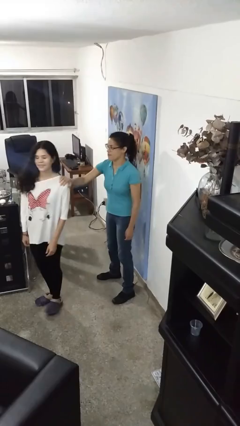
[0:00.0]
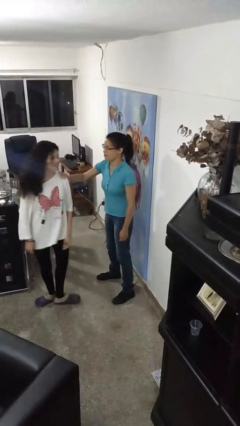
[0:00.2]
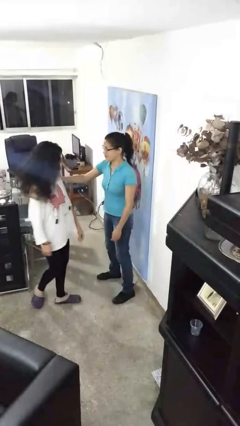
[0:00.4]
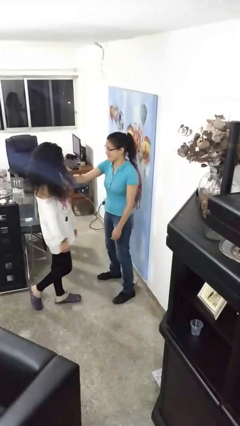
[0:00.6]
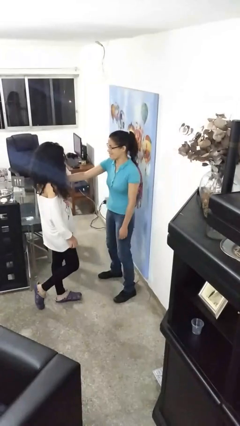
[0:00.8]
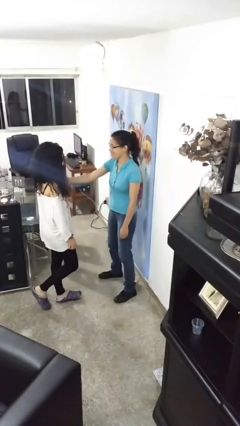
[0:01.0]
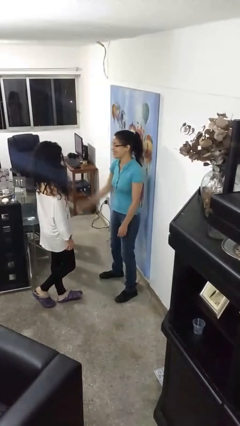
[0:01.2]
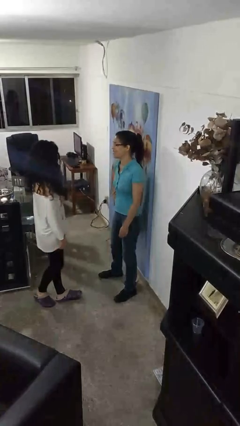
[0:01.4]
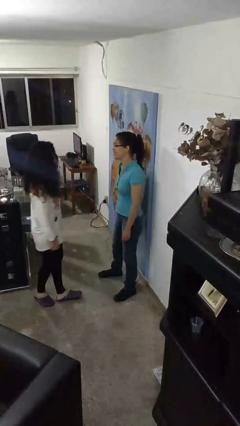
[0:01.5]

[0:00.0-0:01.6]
person spins person around

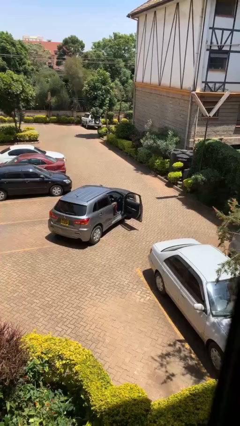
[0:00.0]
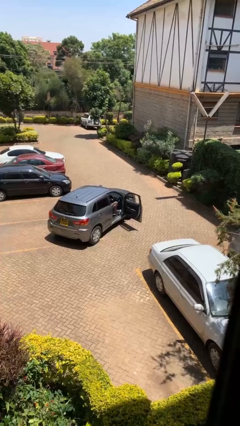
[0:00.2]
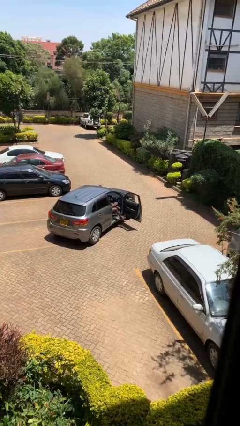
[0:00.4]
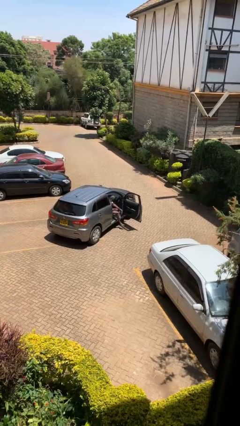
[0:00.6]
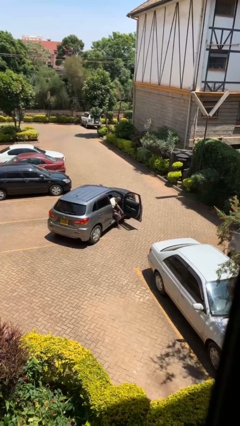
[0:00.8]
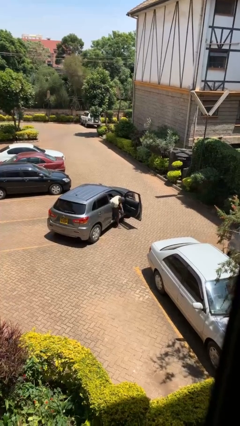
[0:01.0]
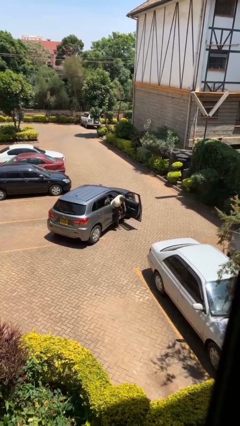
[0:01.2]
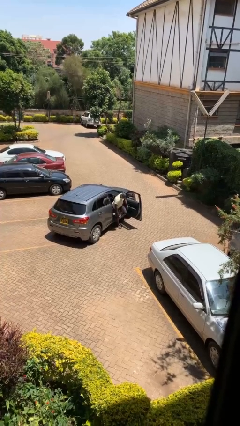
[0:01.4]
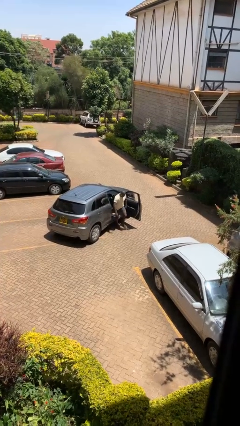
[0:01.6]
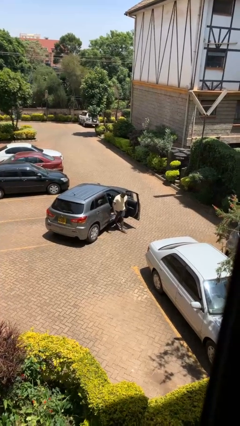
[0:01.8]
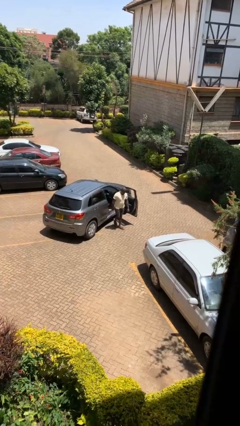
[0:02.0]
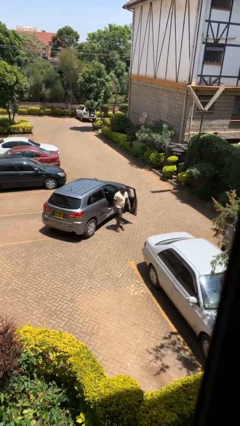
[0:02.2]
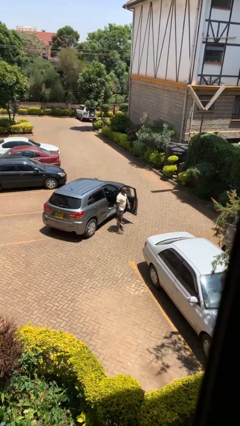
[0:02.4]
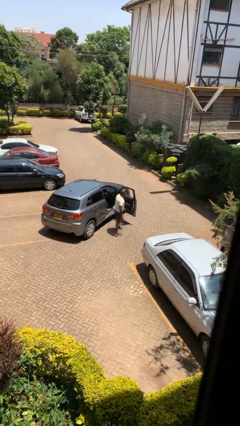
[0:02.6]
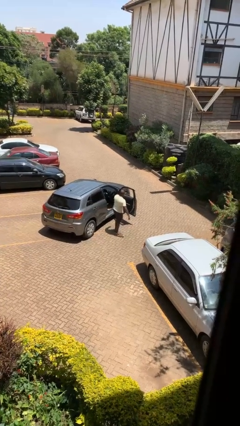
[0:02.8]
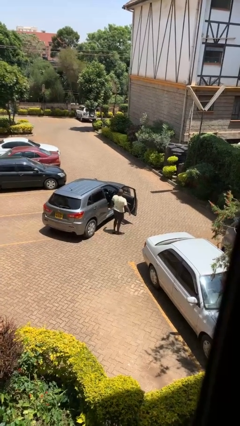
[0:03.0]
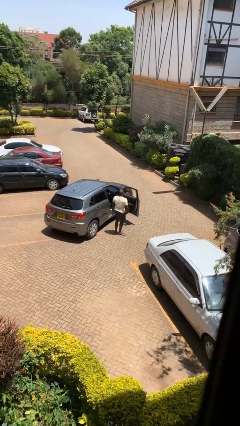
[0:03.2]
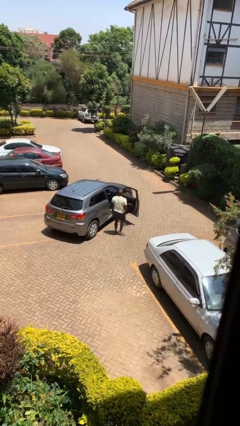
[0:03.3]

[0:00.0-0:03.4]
person exits car

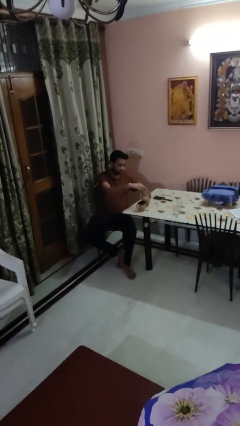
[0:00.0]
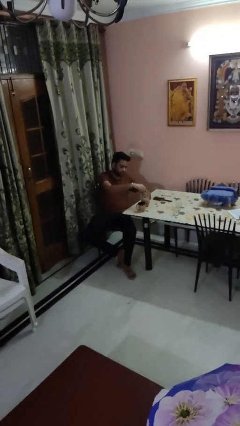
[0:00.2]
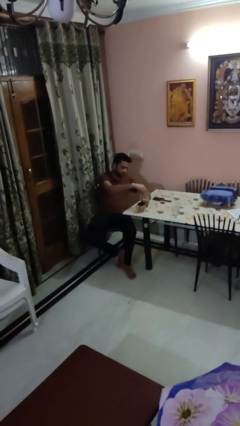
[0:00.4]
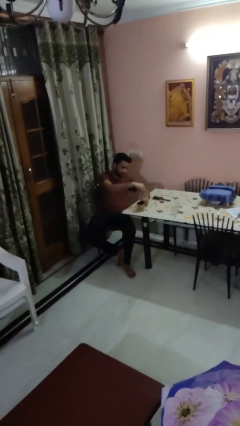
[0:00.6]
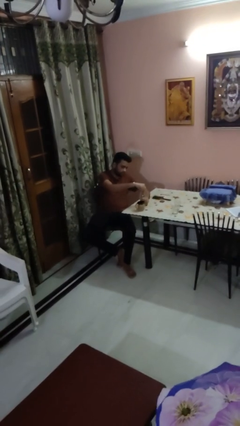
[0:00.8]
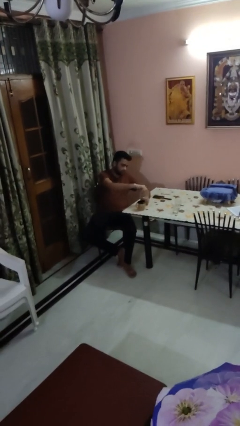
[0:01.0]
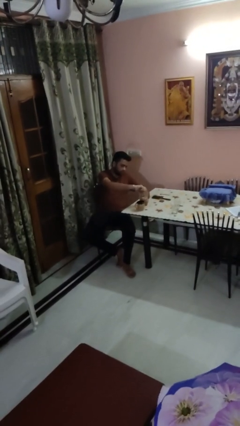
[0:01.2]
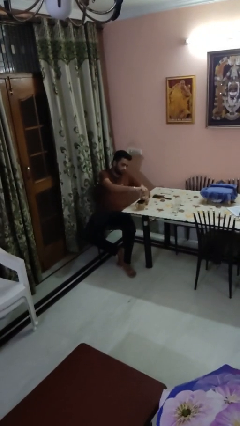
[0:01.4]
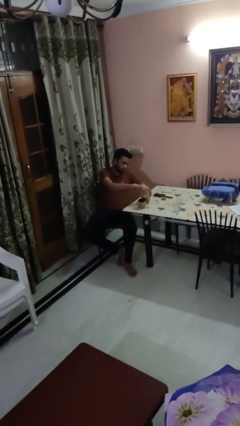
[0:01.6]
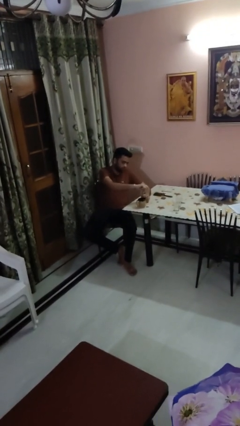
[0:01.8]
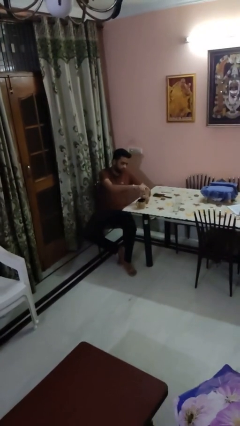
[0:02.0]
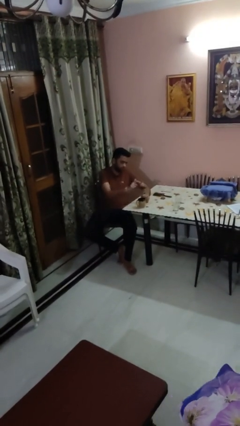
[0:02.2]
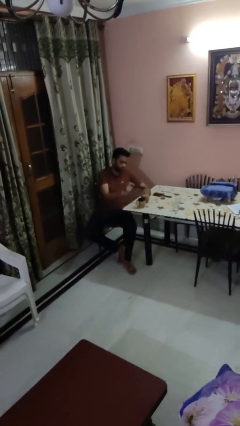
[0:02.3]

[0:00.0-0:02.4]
person screws lid to bottle

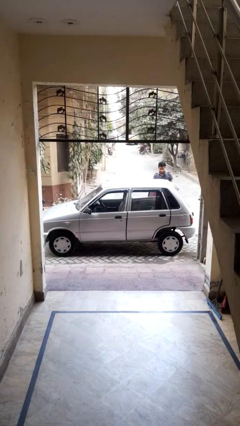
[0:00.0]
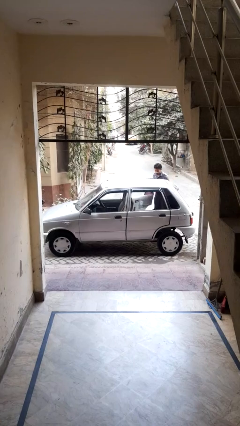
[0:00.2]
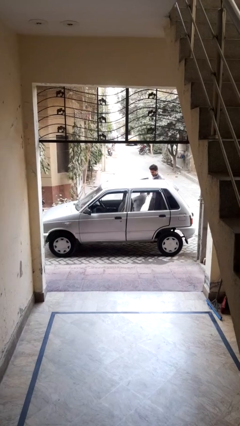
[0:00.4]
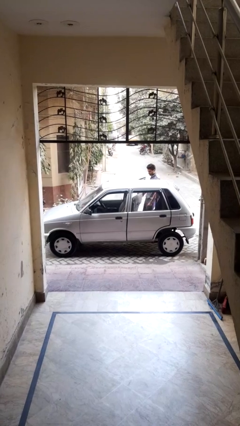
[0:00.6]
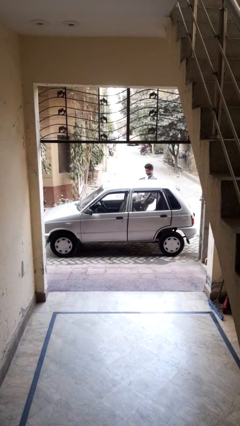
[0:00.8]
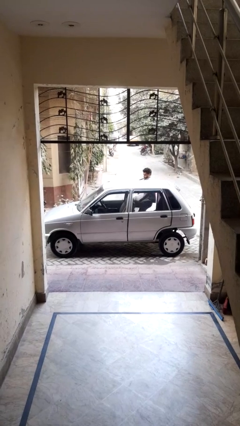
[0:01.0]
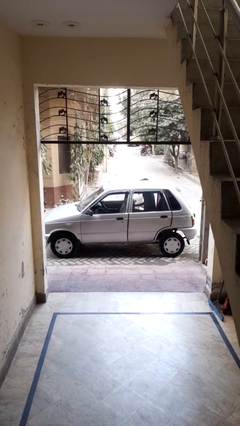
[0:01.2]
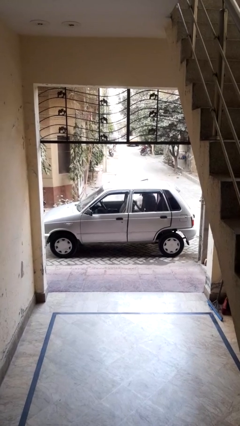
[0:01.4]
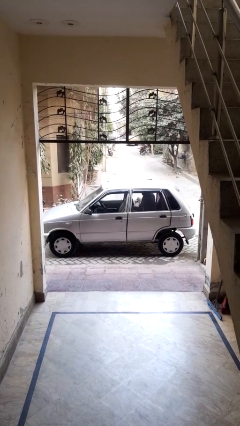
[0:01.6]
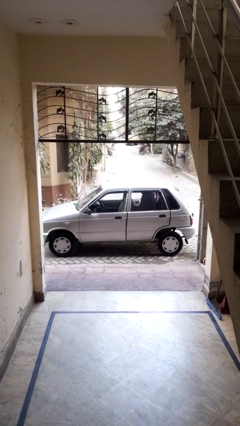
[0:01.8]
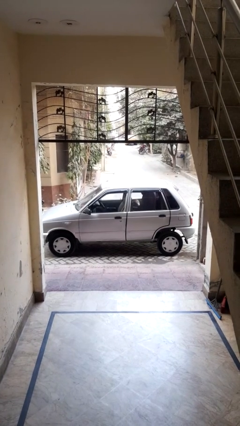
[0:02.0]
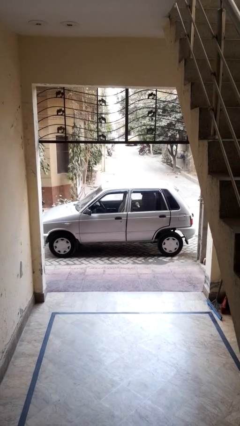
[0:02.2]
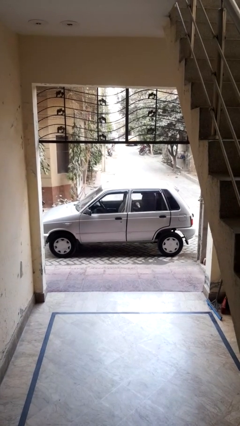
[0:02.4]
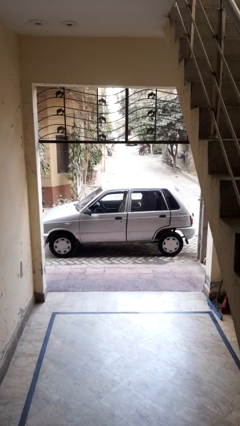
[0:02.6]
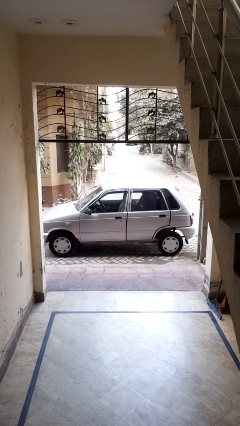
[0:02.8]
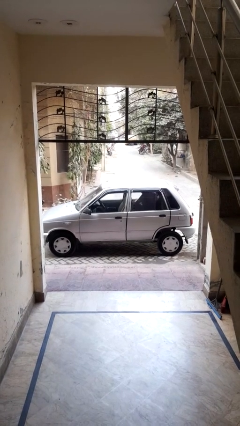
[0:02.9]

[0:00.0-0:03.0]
car picks up person

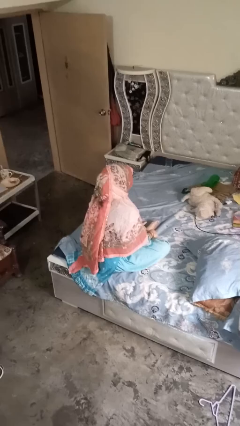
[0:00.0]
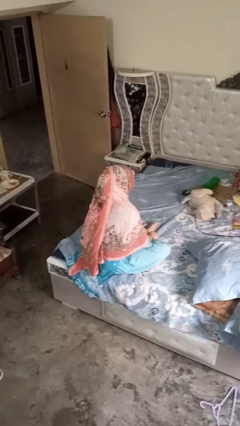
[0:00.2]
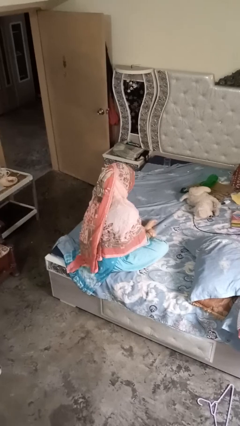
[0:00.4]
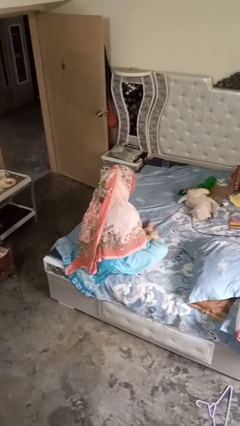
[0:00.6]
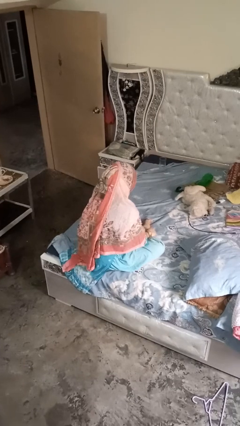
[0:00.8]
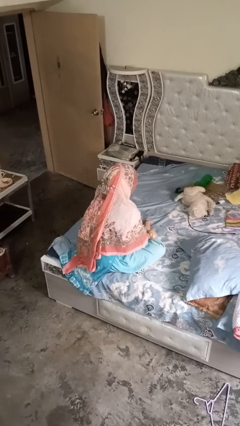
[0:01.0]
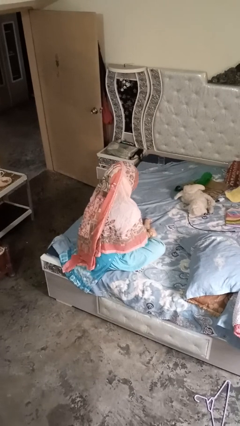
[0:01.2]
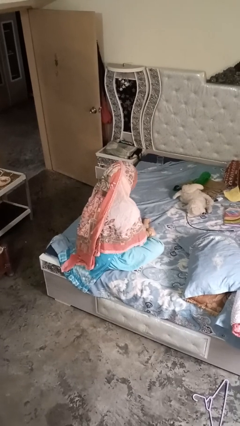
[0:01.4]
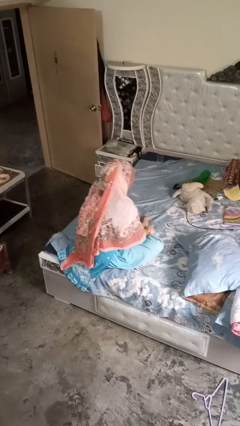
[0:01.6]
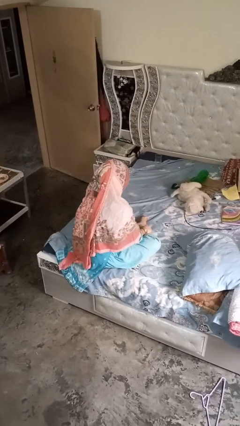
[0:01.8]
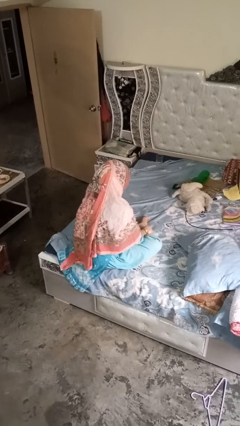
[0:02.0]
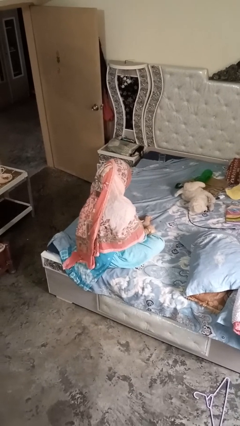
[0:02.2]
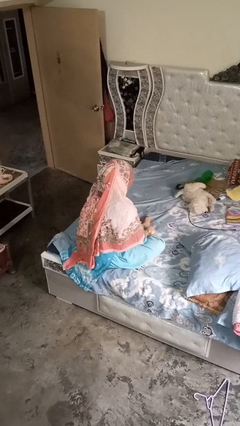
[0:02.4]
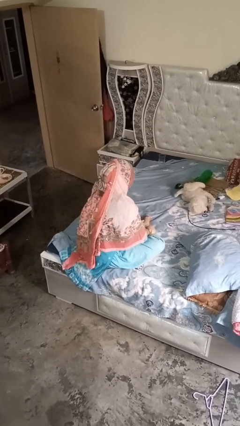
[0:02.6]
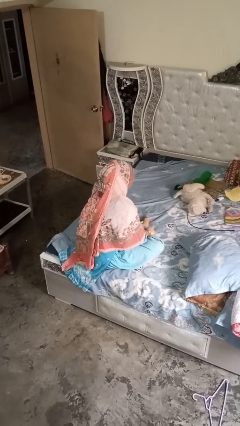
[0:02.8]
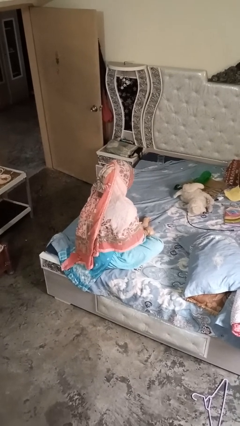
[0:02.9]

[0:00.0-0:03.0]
person rubs foot

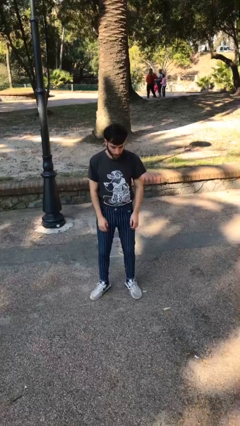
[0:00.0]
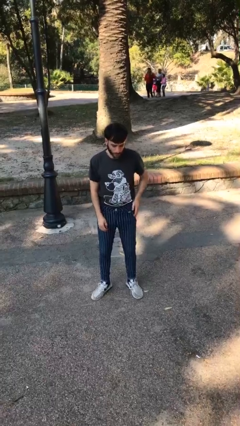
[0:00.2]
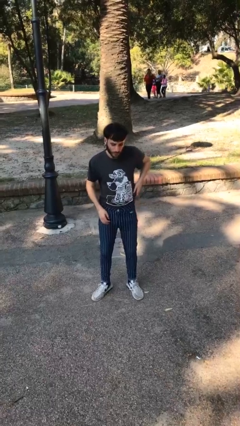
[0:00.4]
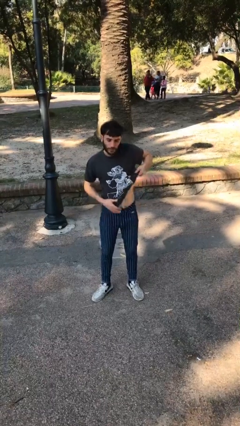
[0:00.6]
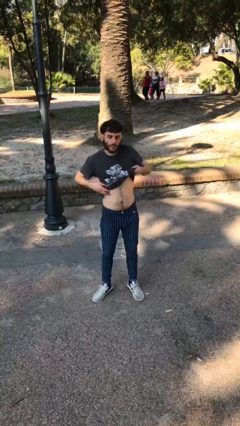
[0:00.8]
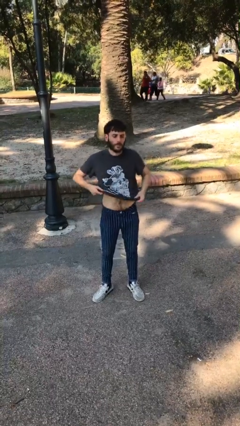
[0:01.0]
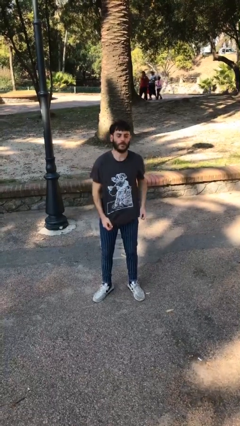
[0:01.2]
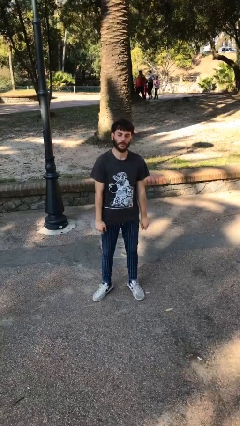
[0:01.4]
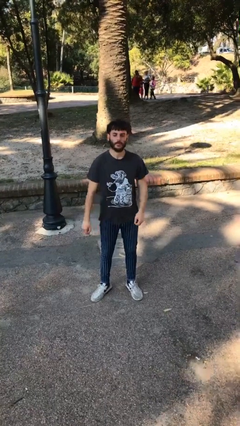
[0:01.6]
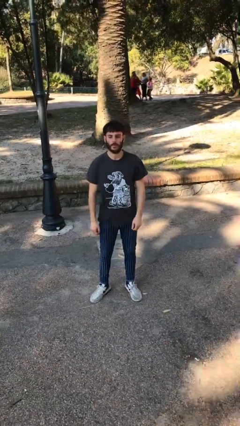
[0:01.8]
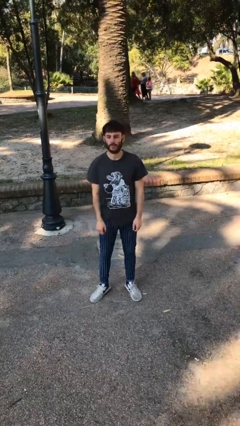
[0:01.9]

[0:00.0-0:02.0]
person untucks shirt

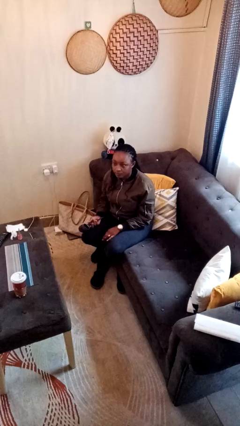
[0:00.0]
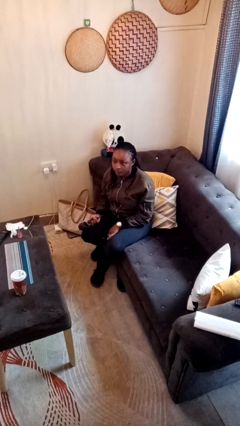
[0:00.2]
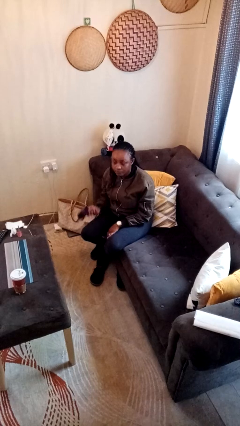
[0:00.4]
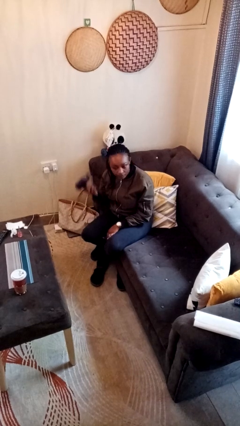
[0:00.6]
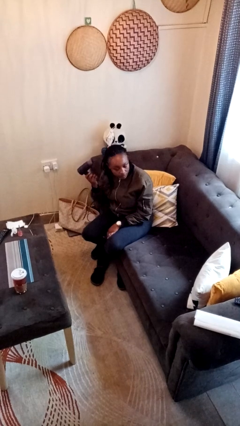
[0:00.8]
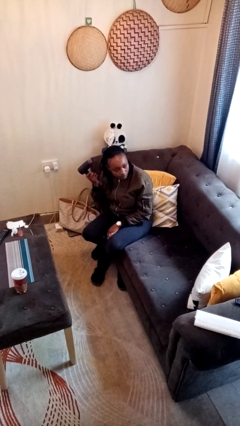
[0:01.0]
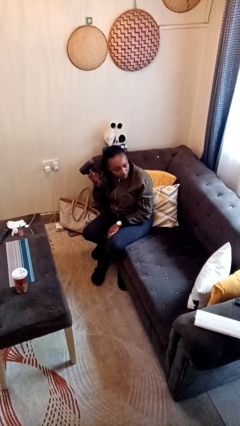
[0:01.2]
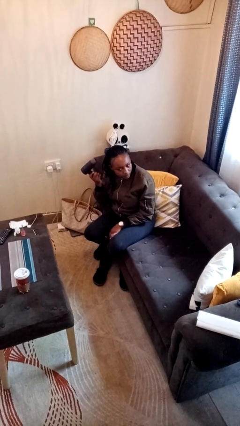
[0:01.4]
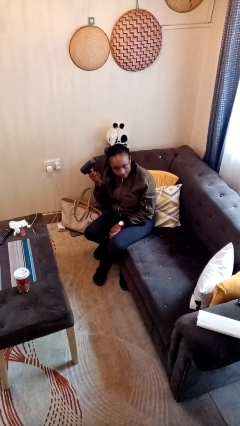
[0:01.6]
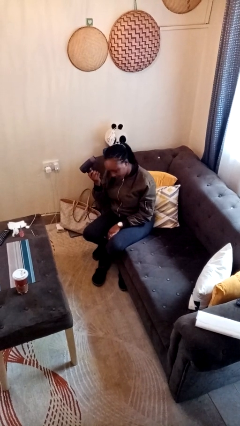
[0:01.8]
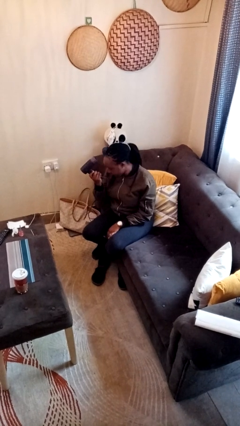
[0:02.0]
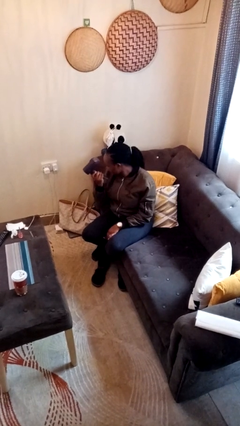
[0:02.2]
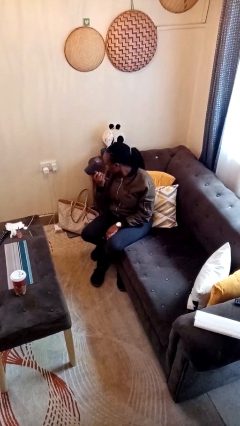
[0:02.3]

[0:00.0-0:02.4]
person dries hair with hairdryer
